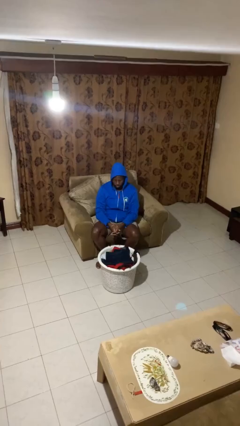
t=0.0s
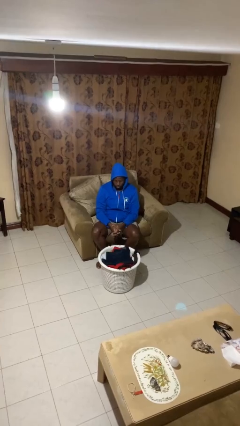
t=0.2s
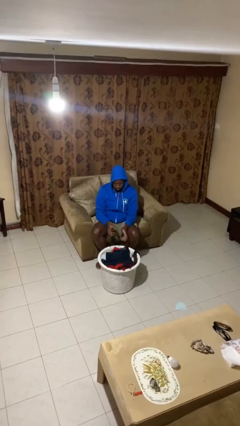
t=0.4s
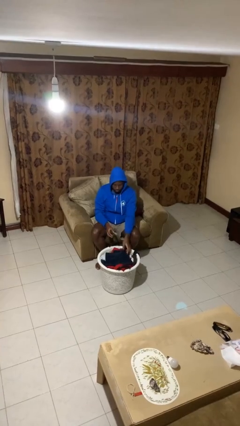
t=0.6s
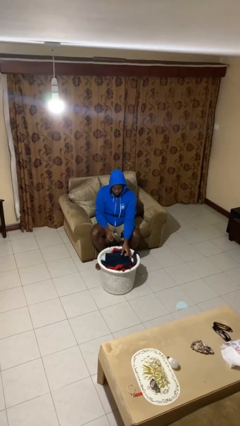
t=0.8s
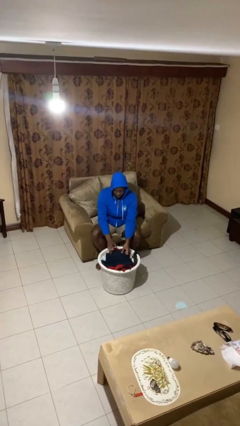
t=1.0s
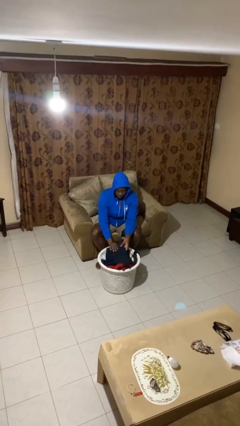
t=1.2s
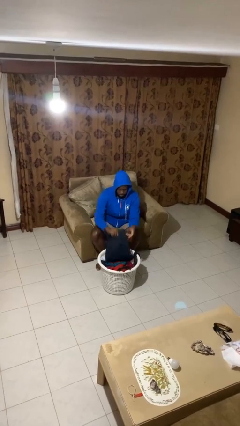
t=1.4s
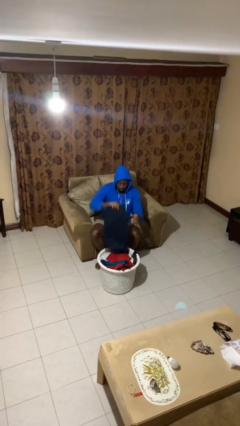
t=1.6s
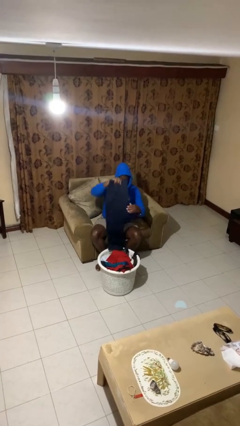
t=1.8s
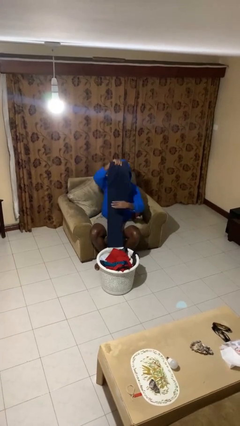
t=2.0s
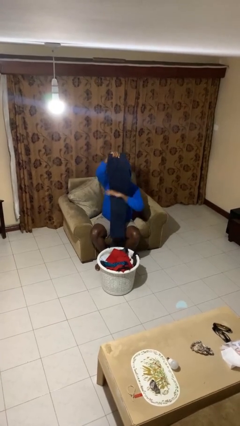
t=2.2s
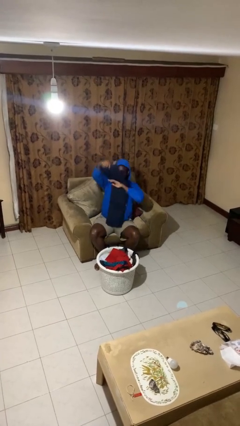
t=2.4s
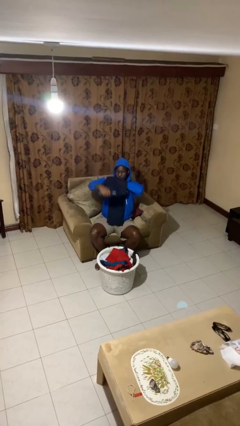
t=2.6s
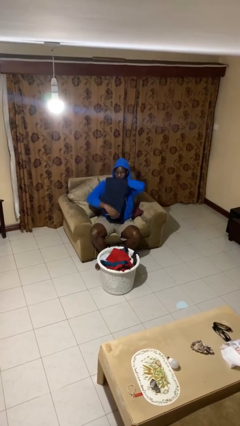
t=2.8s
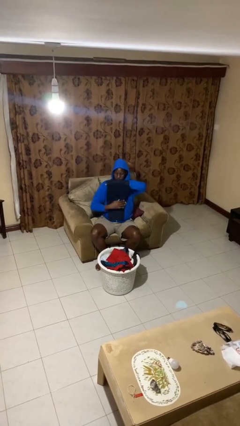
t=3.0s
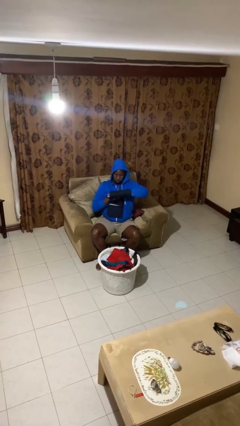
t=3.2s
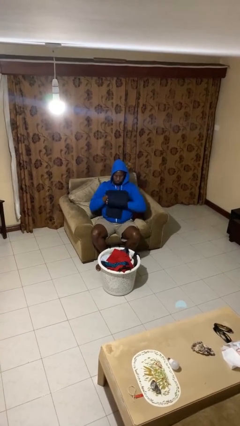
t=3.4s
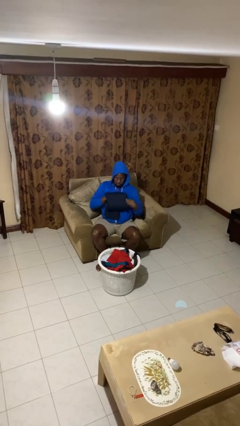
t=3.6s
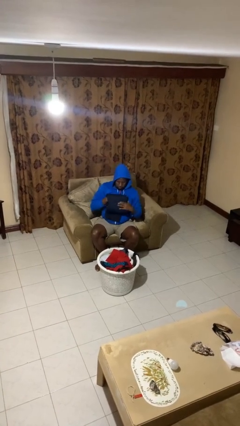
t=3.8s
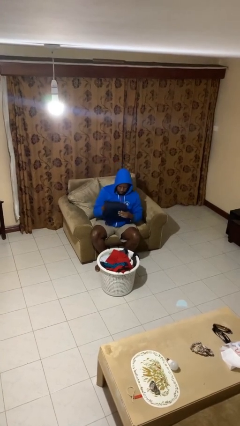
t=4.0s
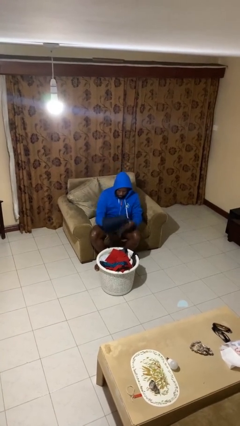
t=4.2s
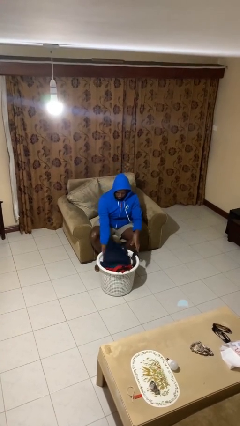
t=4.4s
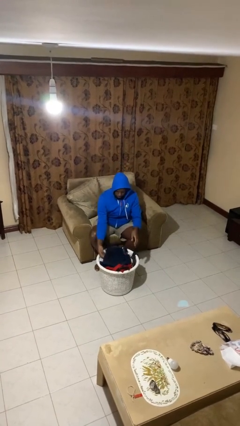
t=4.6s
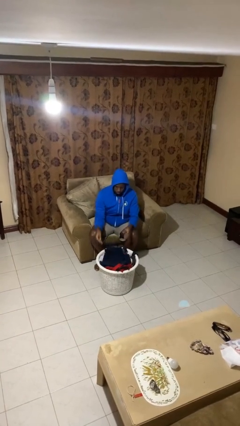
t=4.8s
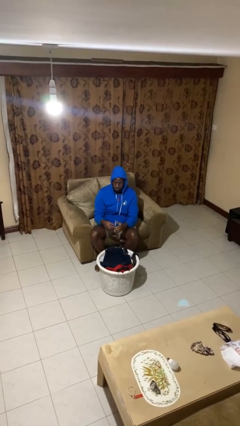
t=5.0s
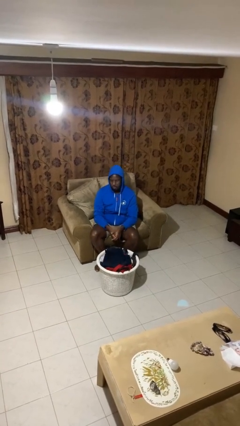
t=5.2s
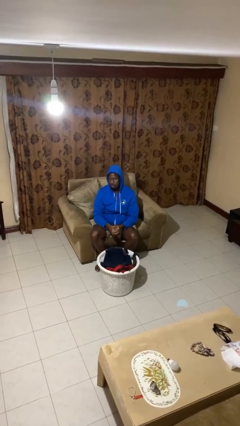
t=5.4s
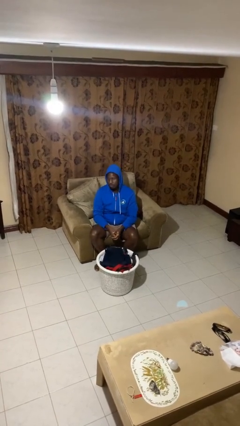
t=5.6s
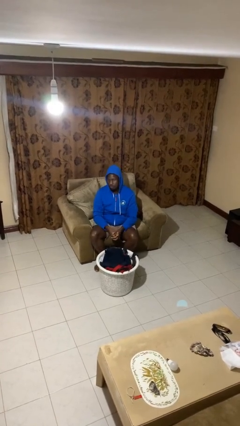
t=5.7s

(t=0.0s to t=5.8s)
person folds pants

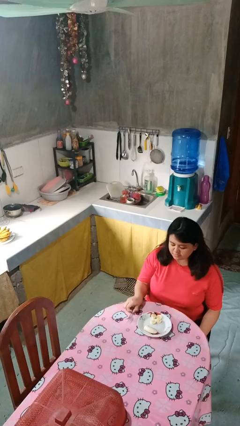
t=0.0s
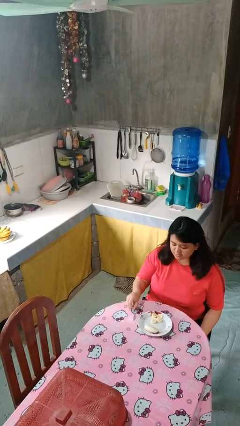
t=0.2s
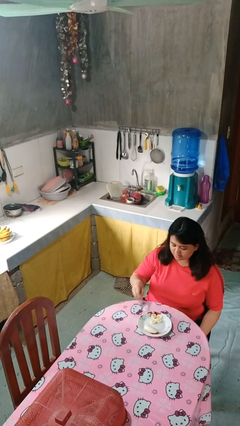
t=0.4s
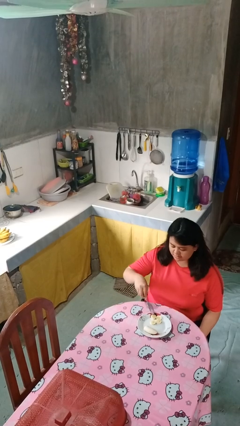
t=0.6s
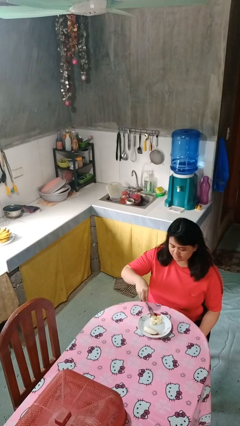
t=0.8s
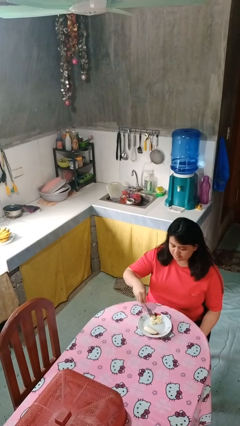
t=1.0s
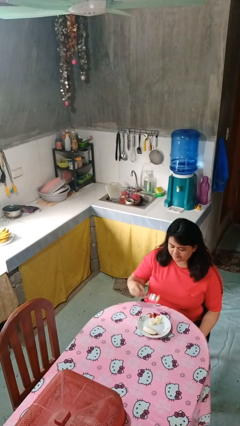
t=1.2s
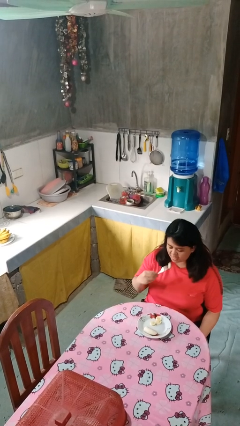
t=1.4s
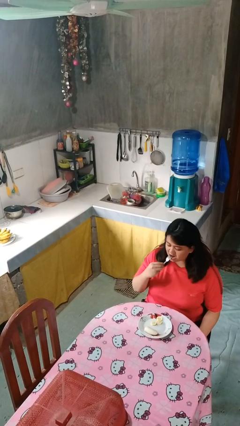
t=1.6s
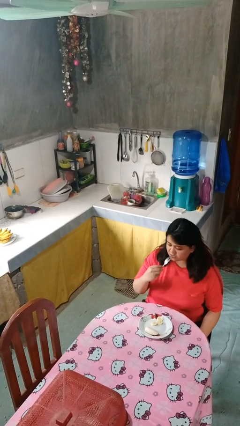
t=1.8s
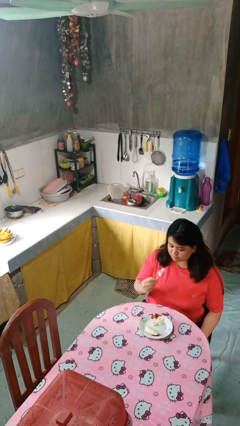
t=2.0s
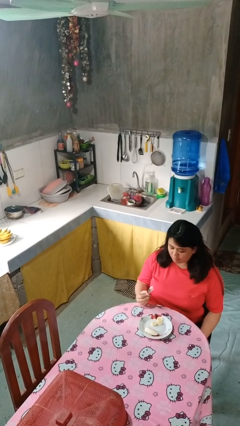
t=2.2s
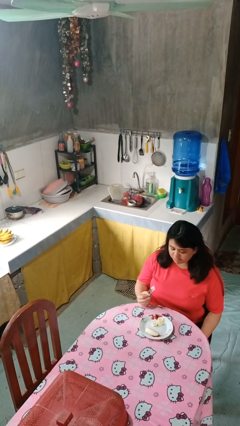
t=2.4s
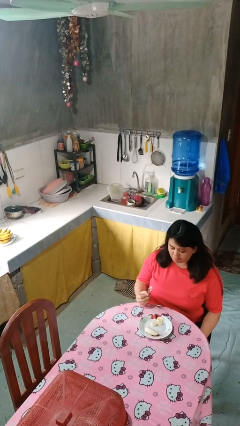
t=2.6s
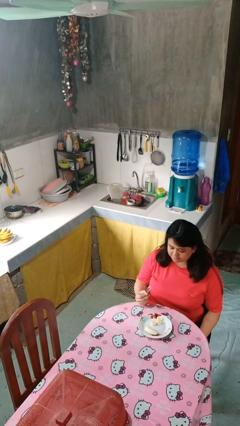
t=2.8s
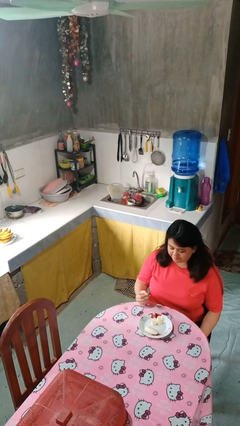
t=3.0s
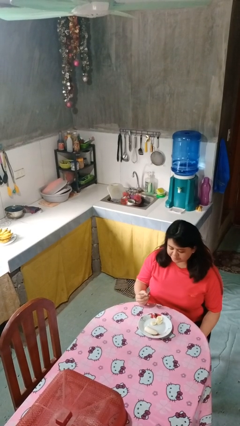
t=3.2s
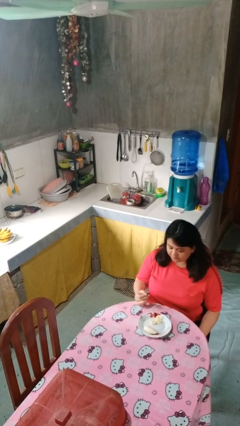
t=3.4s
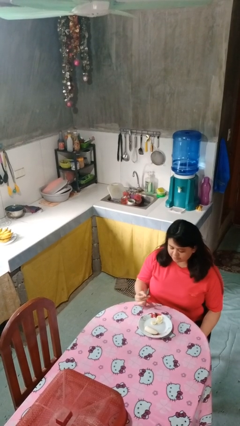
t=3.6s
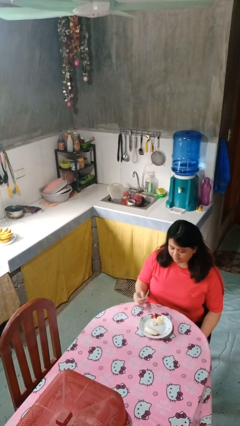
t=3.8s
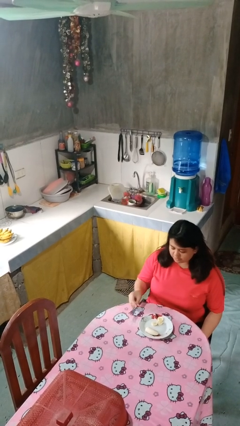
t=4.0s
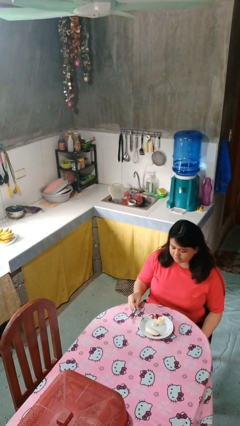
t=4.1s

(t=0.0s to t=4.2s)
person eats with utensil

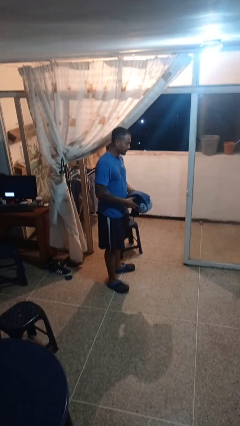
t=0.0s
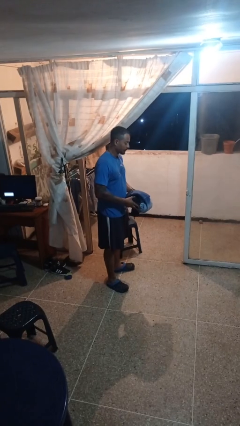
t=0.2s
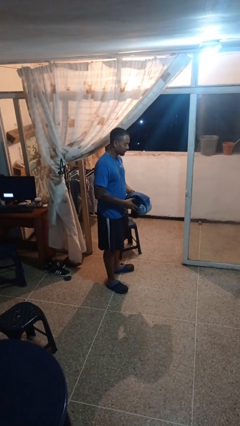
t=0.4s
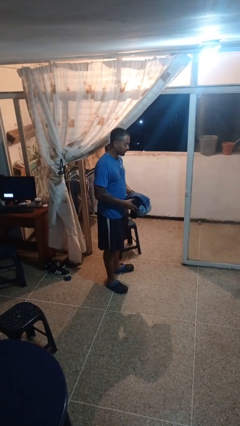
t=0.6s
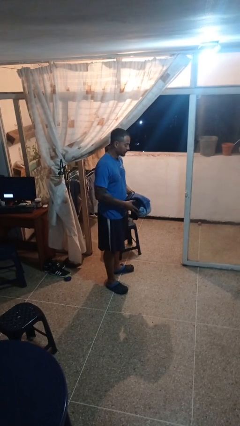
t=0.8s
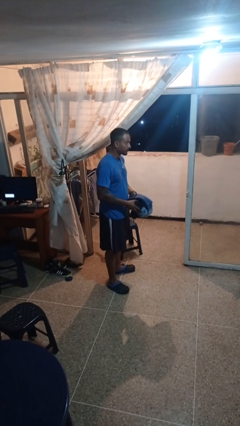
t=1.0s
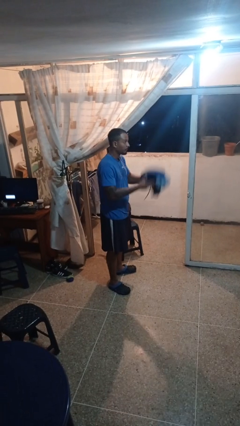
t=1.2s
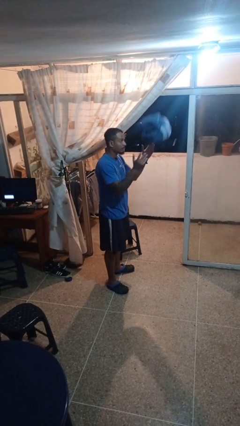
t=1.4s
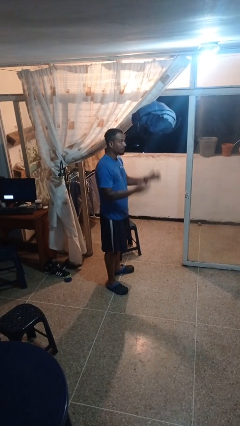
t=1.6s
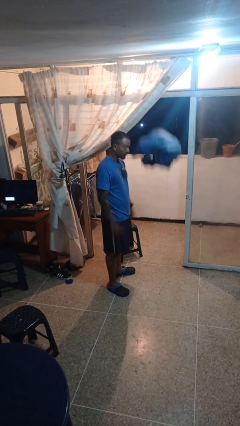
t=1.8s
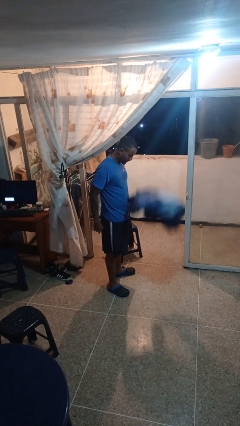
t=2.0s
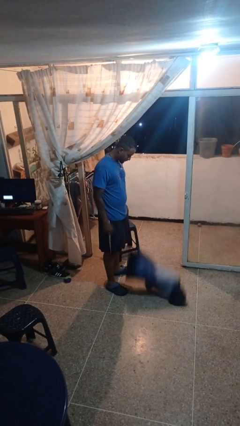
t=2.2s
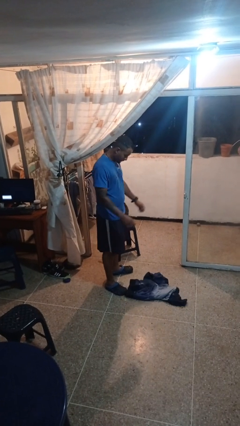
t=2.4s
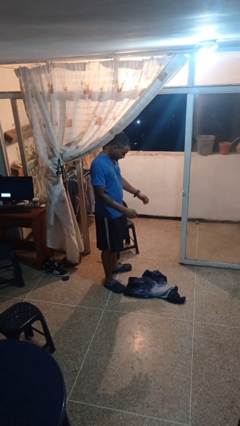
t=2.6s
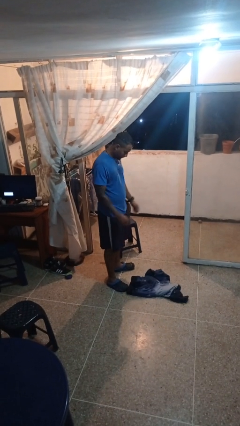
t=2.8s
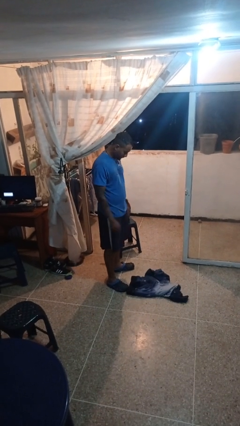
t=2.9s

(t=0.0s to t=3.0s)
person throws object into air

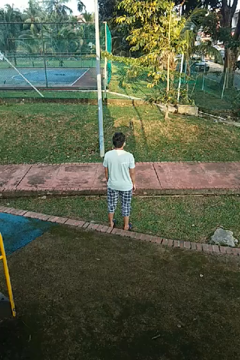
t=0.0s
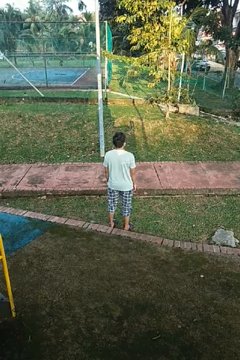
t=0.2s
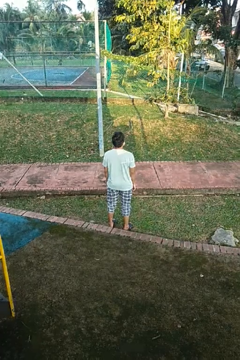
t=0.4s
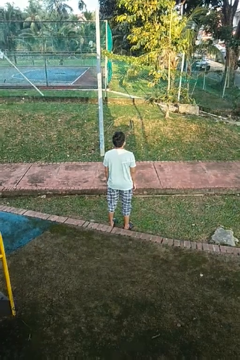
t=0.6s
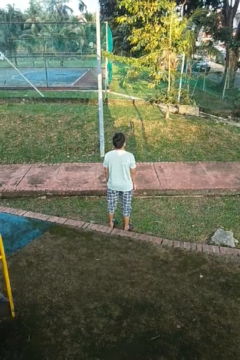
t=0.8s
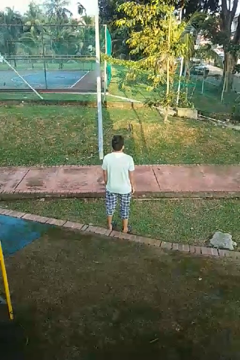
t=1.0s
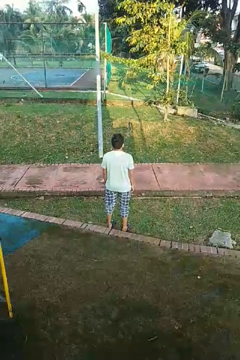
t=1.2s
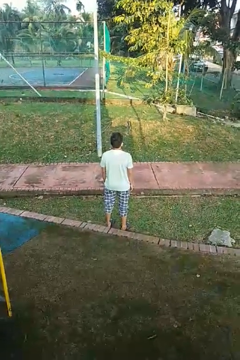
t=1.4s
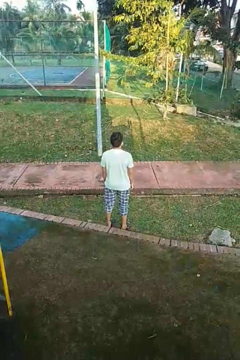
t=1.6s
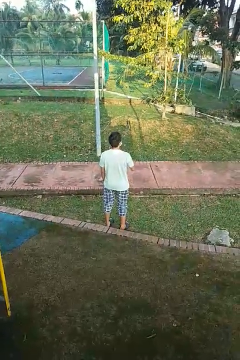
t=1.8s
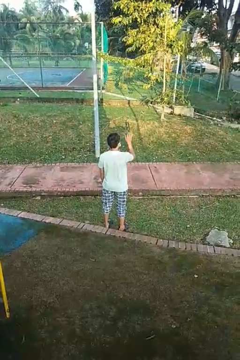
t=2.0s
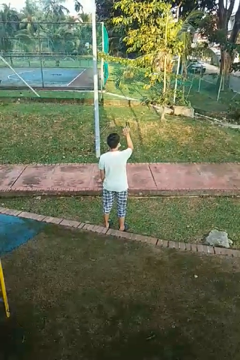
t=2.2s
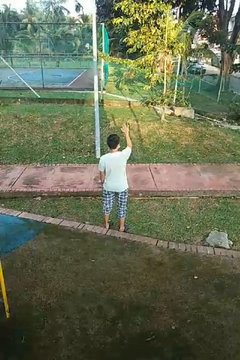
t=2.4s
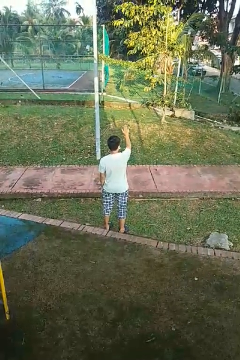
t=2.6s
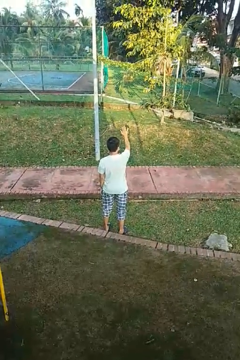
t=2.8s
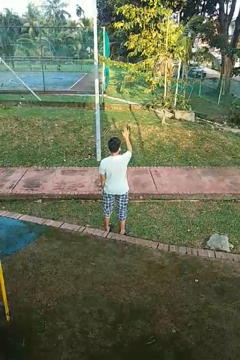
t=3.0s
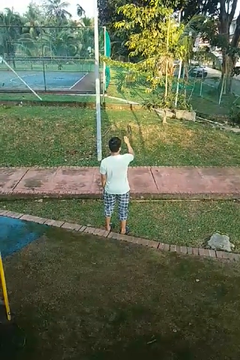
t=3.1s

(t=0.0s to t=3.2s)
person gestures stop

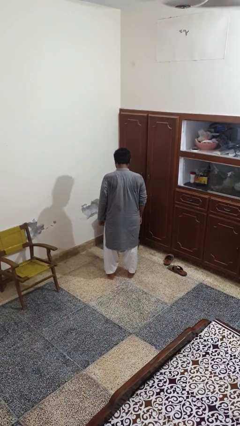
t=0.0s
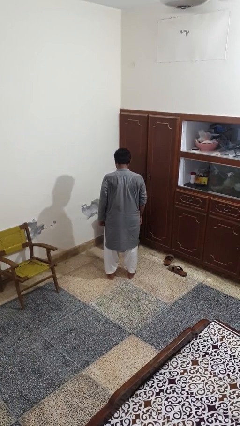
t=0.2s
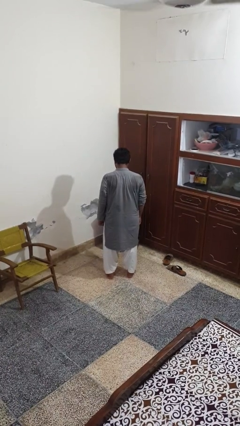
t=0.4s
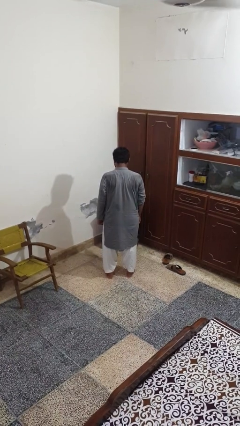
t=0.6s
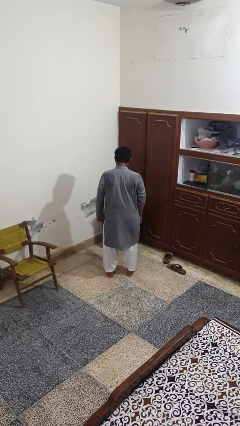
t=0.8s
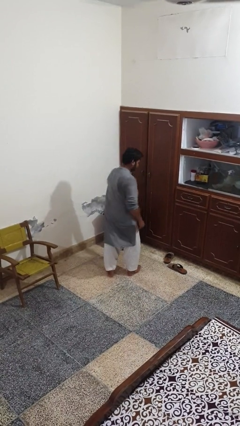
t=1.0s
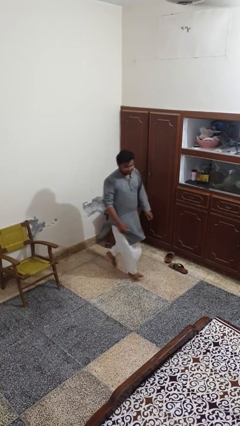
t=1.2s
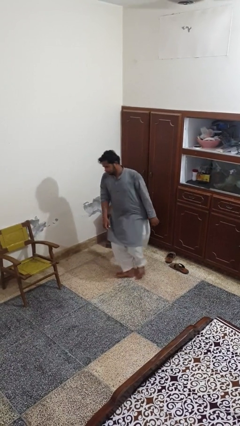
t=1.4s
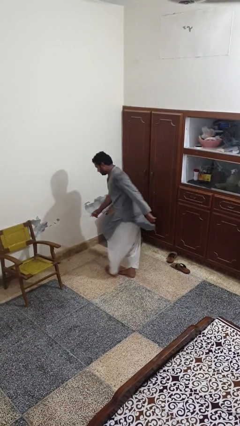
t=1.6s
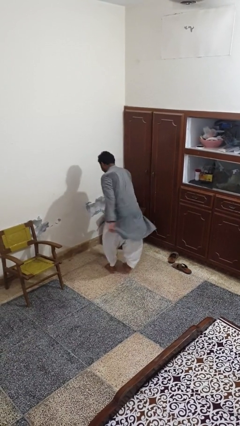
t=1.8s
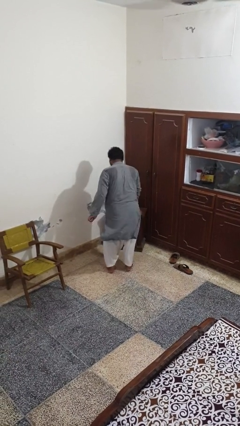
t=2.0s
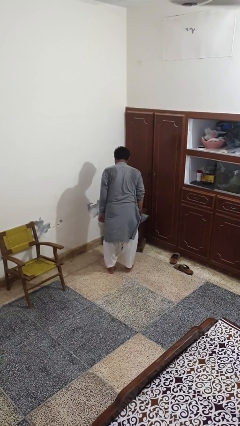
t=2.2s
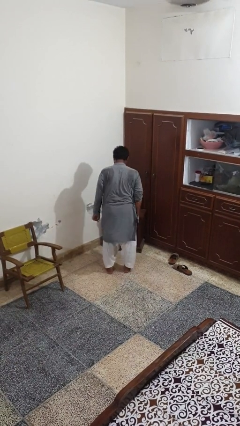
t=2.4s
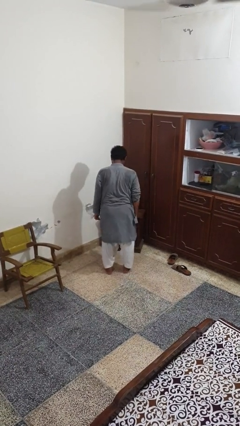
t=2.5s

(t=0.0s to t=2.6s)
person twirls
